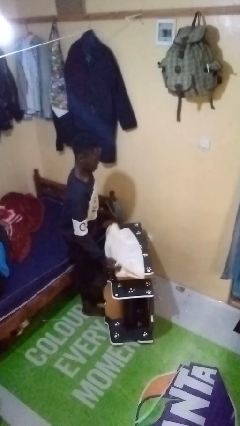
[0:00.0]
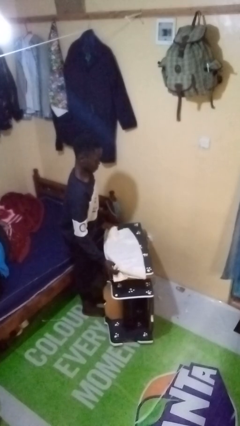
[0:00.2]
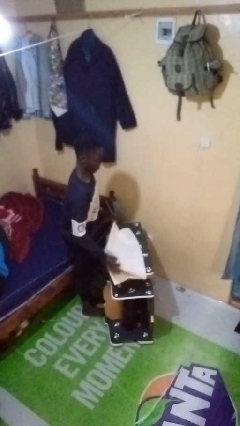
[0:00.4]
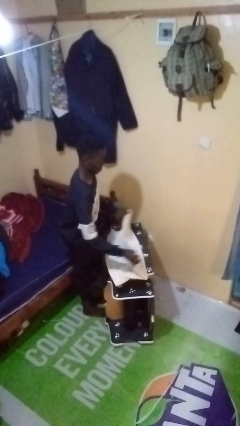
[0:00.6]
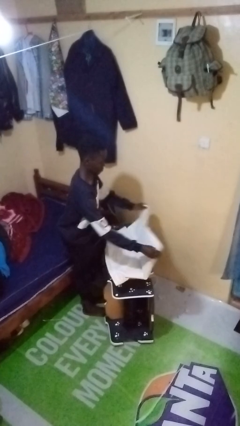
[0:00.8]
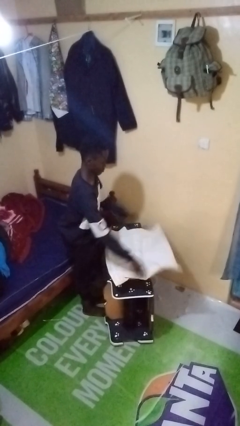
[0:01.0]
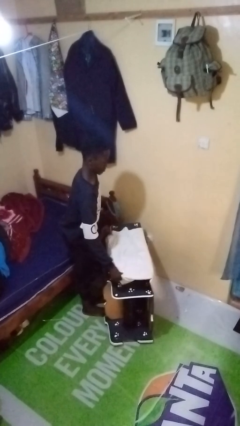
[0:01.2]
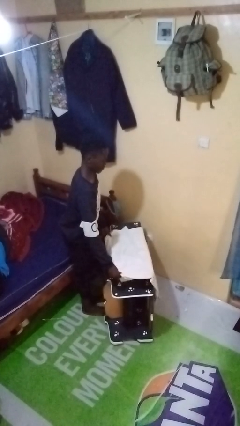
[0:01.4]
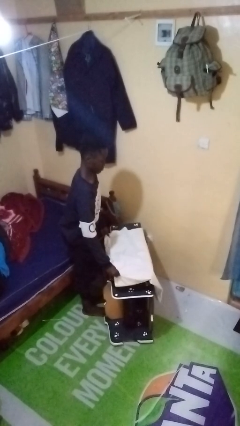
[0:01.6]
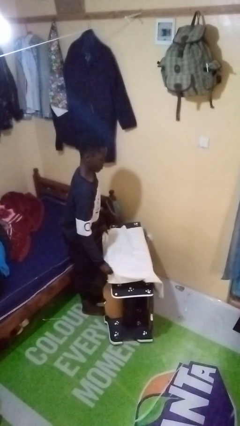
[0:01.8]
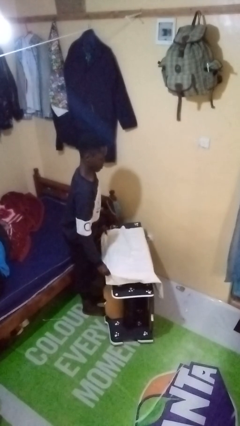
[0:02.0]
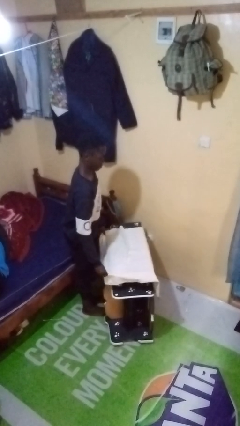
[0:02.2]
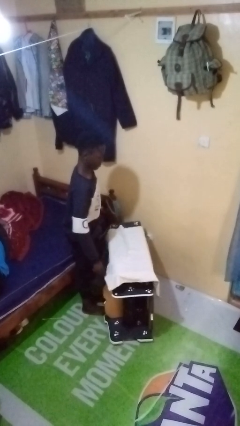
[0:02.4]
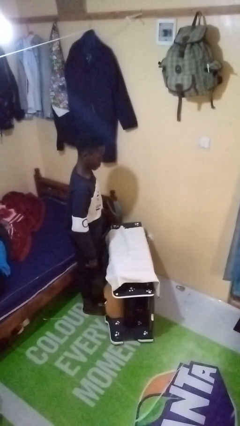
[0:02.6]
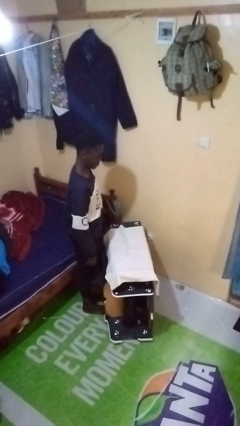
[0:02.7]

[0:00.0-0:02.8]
person spreads tablecloth

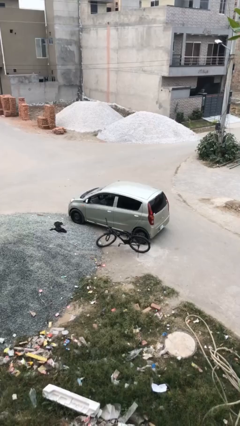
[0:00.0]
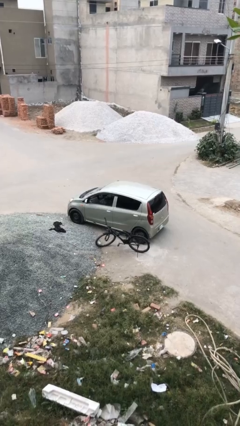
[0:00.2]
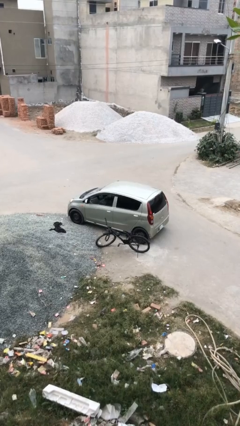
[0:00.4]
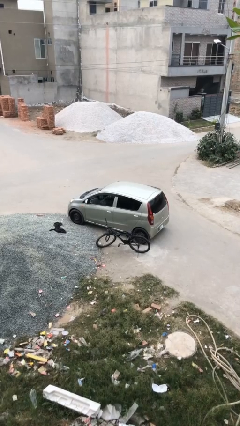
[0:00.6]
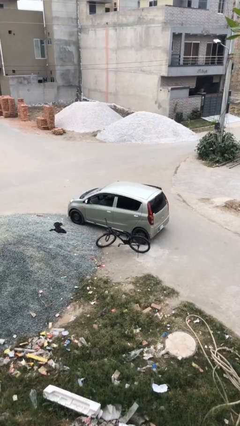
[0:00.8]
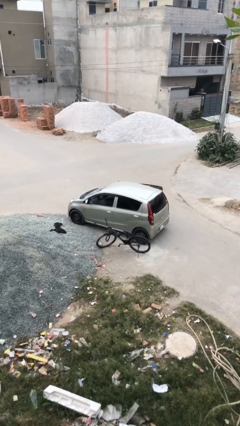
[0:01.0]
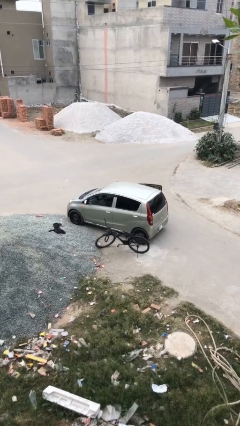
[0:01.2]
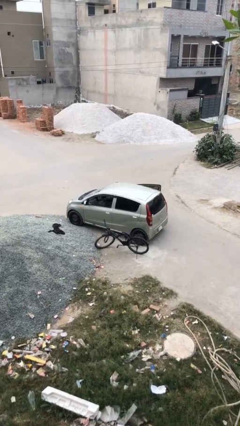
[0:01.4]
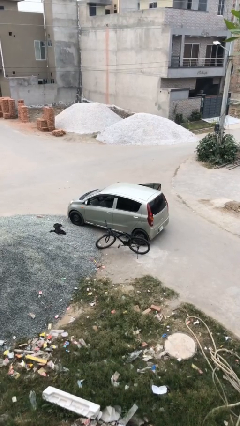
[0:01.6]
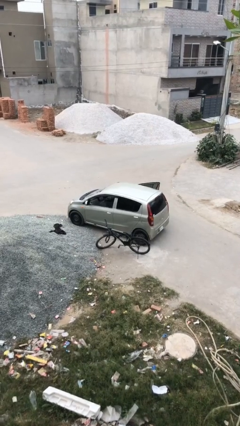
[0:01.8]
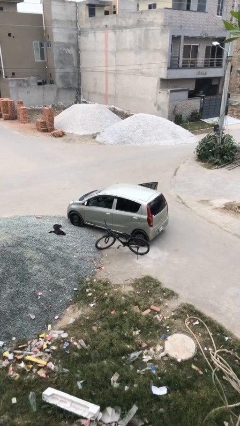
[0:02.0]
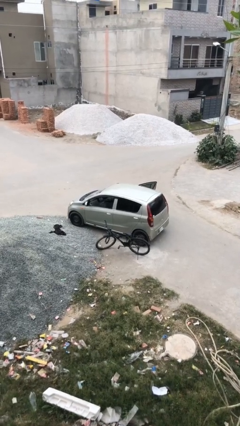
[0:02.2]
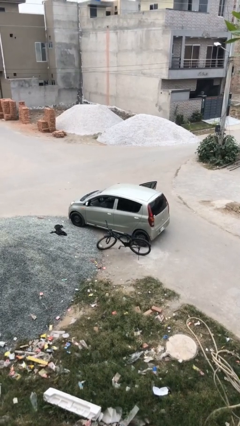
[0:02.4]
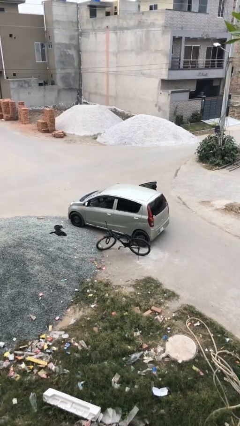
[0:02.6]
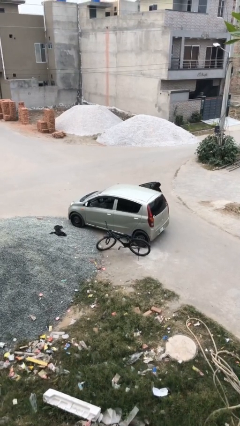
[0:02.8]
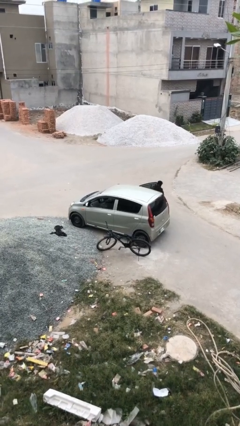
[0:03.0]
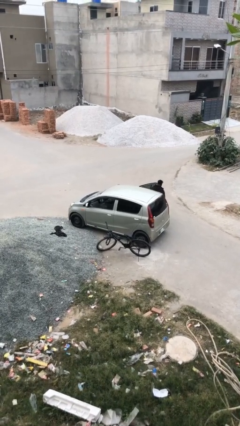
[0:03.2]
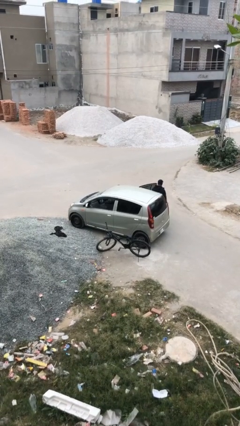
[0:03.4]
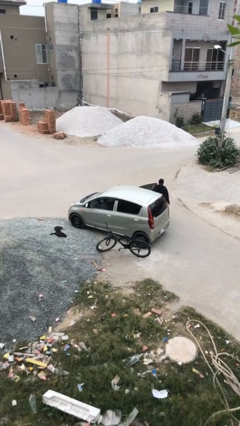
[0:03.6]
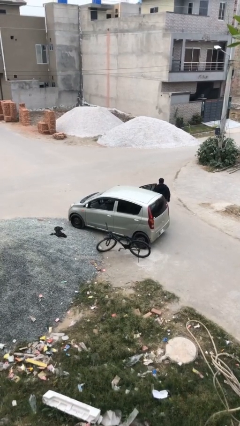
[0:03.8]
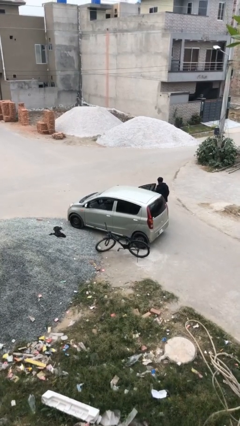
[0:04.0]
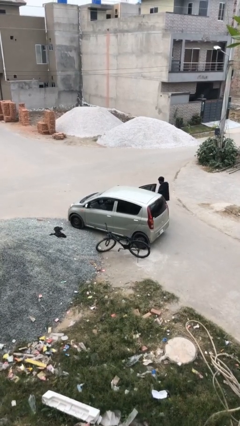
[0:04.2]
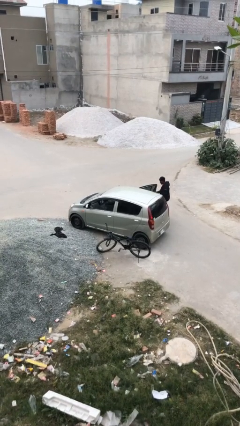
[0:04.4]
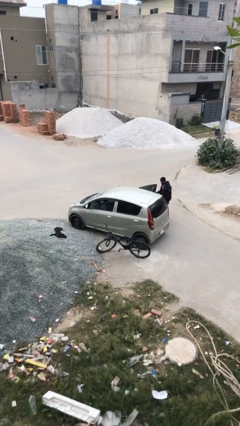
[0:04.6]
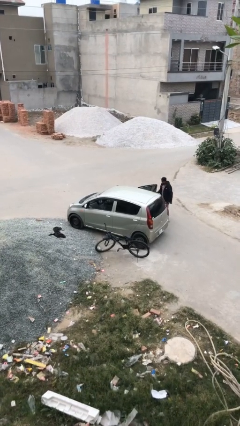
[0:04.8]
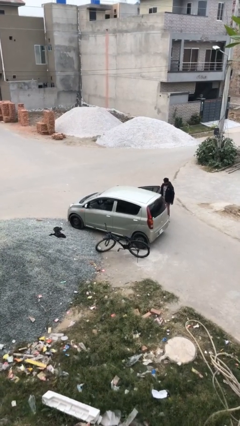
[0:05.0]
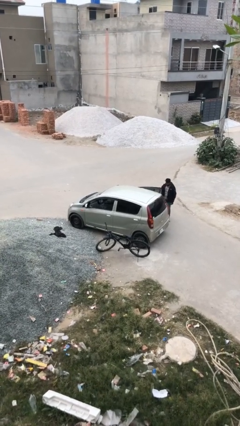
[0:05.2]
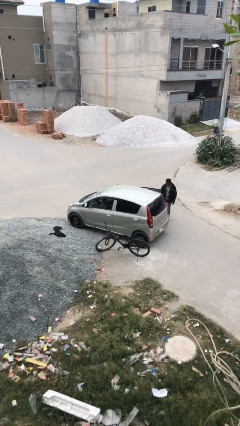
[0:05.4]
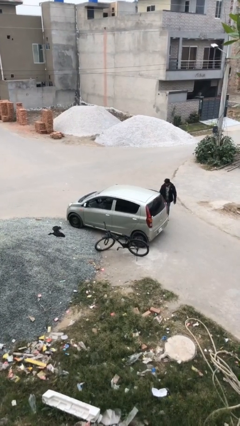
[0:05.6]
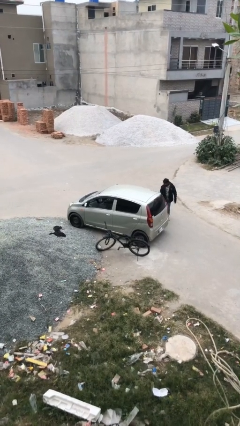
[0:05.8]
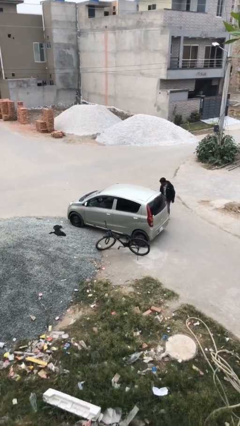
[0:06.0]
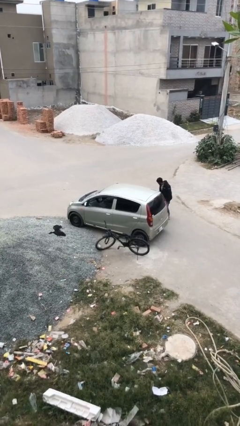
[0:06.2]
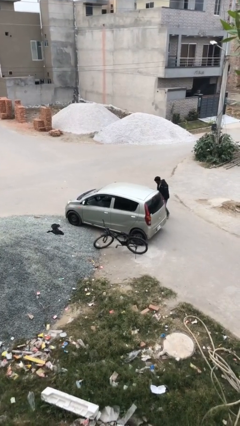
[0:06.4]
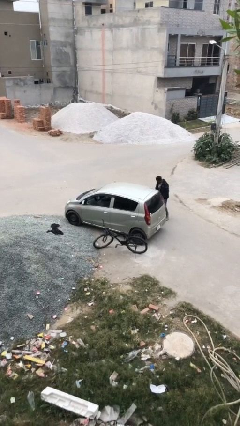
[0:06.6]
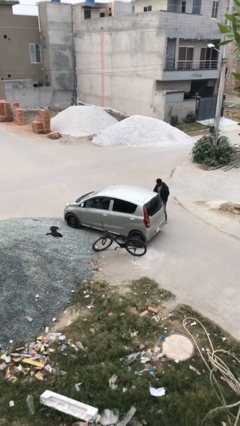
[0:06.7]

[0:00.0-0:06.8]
car drops off person

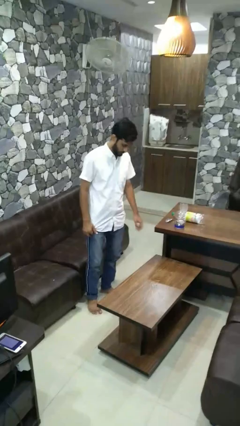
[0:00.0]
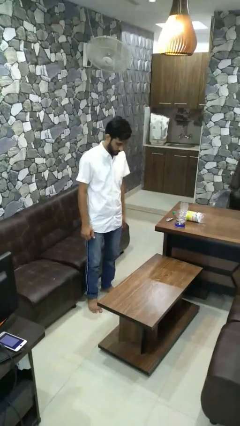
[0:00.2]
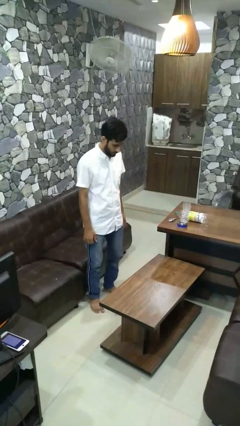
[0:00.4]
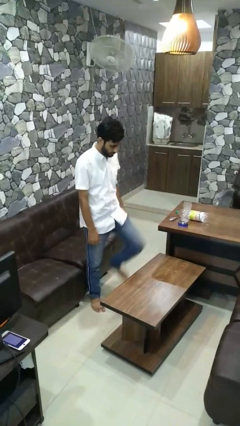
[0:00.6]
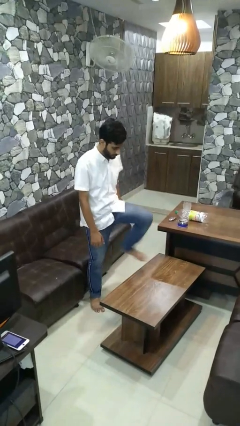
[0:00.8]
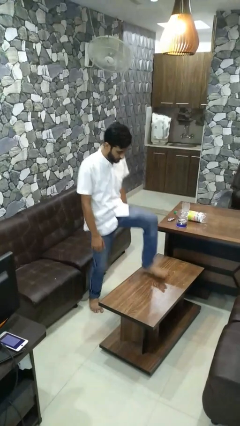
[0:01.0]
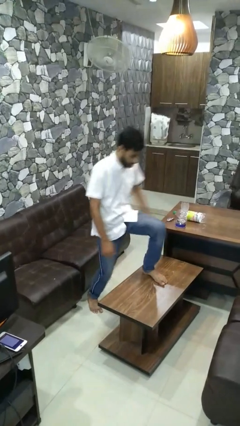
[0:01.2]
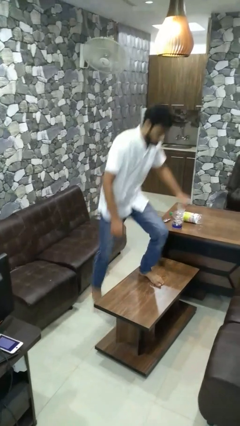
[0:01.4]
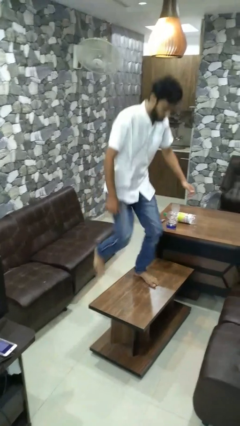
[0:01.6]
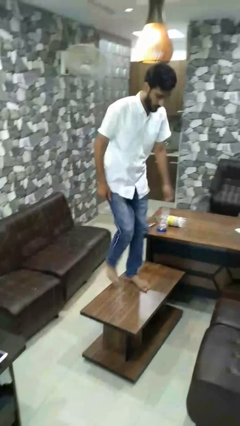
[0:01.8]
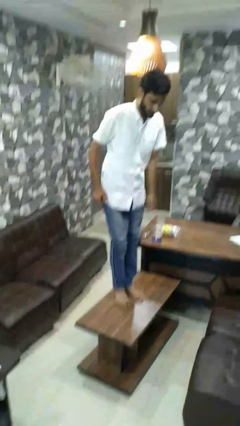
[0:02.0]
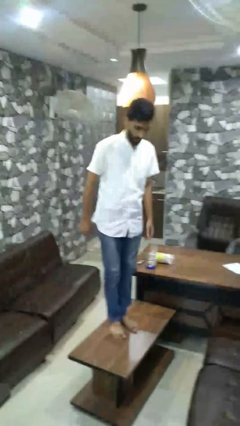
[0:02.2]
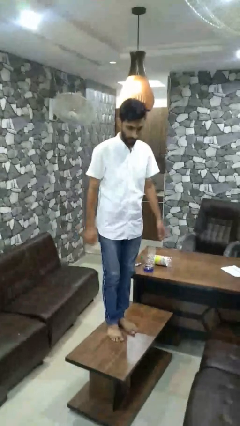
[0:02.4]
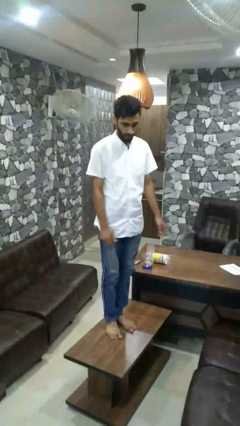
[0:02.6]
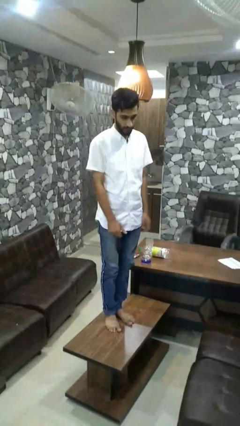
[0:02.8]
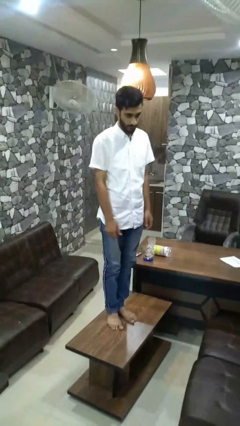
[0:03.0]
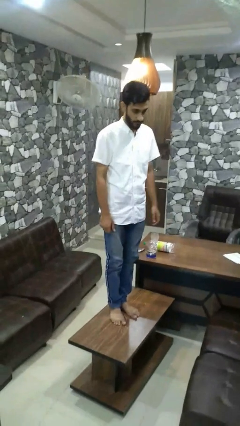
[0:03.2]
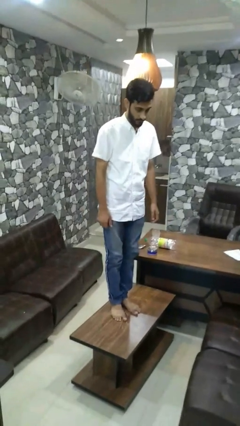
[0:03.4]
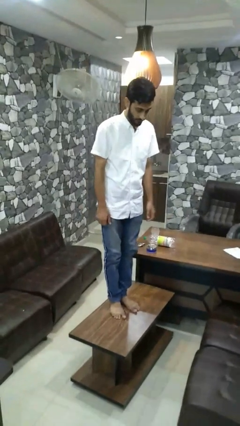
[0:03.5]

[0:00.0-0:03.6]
person climbs on table

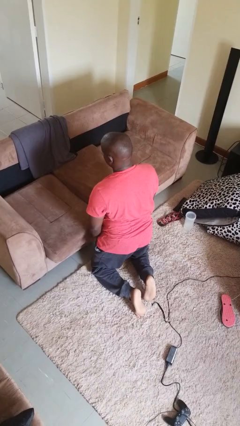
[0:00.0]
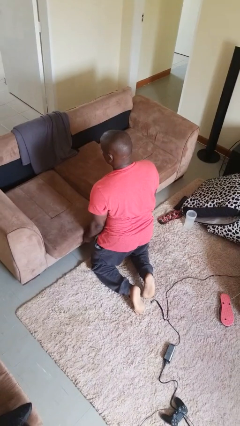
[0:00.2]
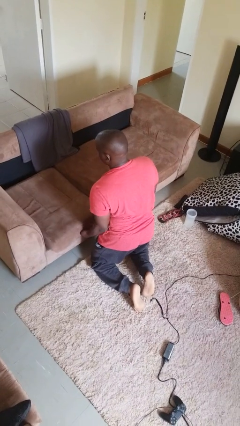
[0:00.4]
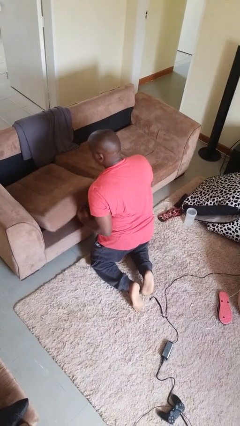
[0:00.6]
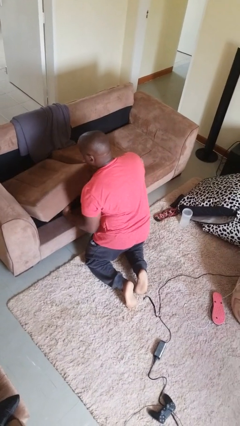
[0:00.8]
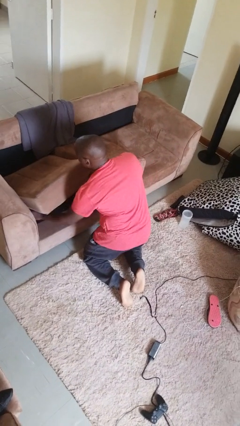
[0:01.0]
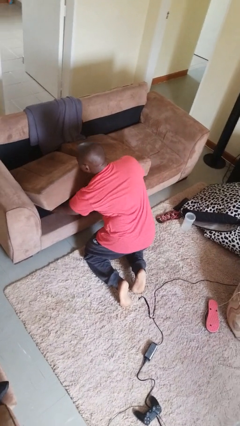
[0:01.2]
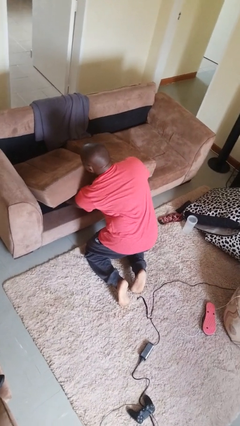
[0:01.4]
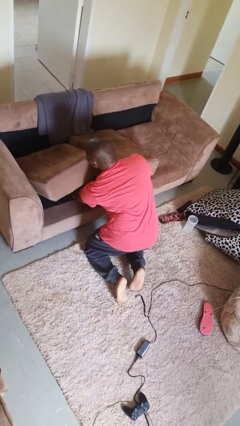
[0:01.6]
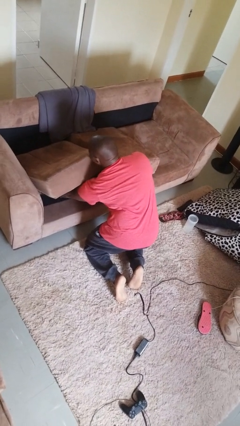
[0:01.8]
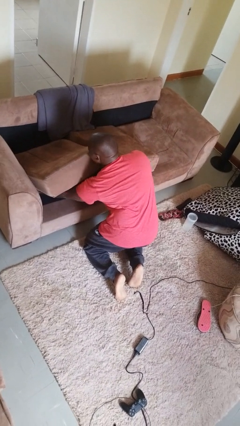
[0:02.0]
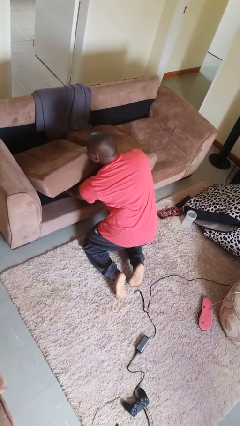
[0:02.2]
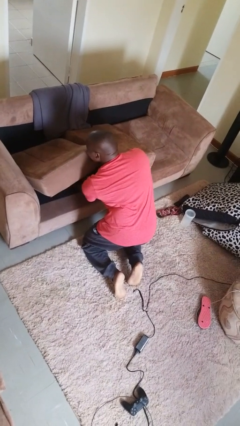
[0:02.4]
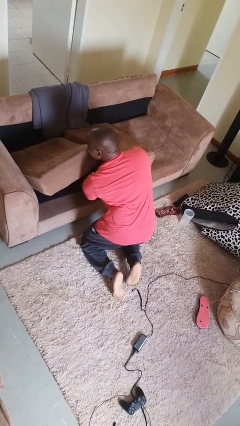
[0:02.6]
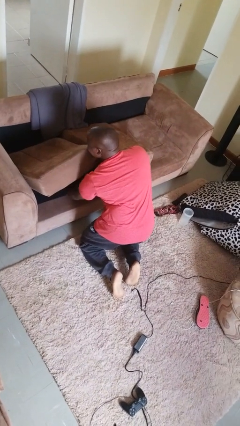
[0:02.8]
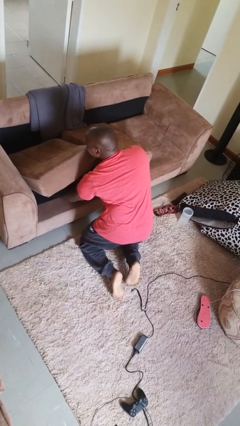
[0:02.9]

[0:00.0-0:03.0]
person searches under couch

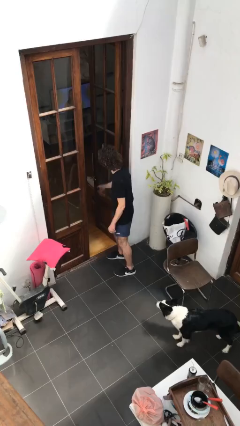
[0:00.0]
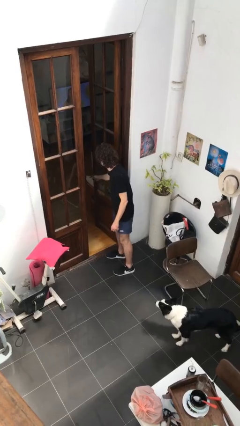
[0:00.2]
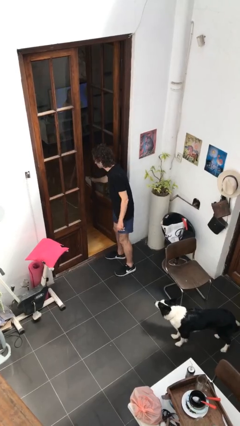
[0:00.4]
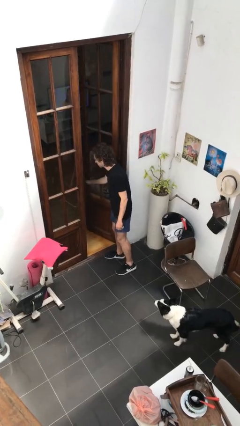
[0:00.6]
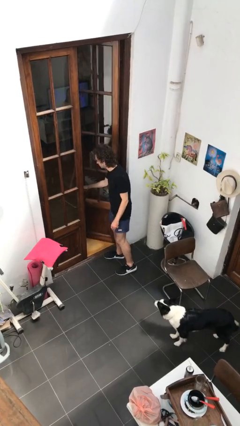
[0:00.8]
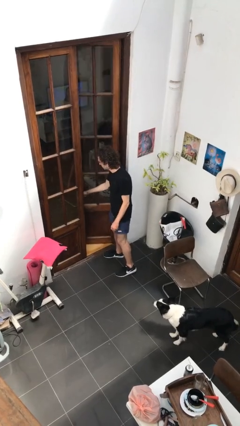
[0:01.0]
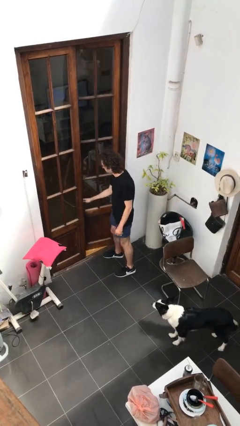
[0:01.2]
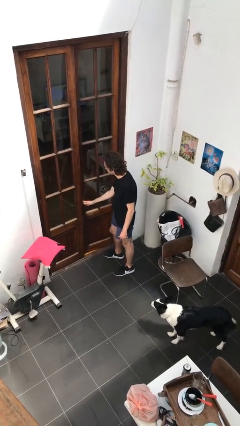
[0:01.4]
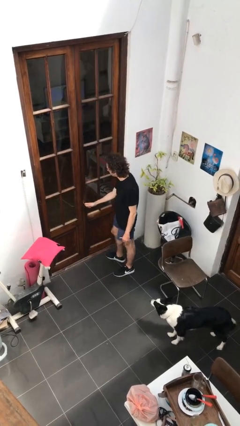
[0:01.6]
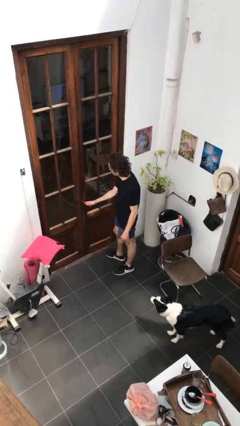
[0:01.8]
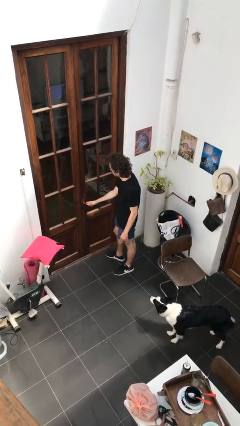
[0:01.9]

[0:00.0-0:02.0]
person closes facility door
